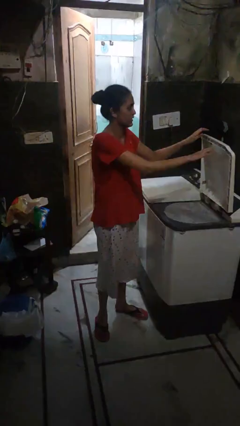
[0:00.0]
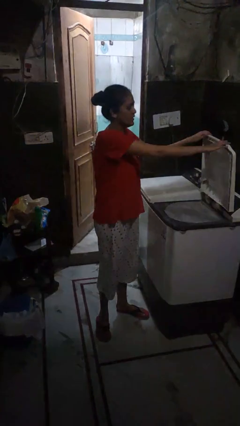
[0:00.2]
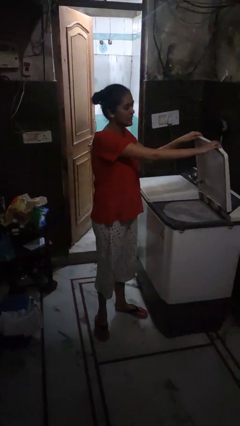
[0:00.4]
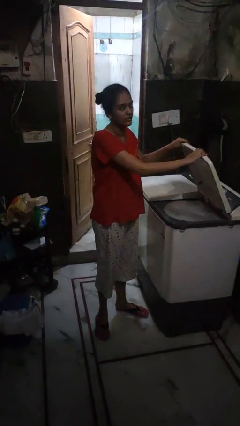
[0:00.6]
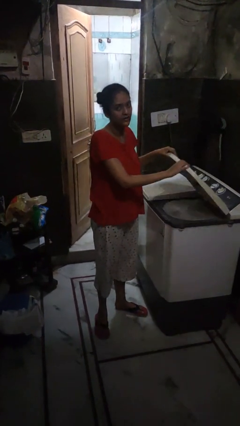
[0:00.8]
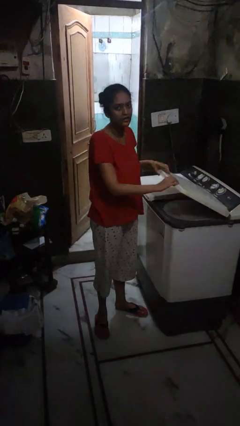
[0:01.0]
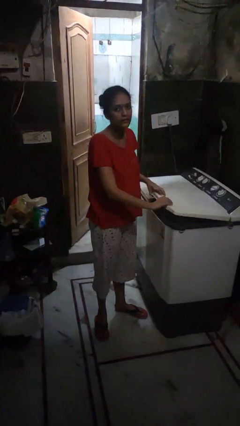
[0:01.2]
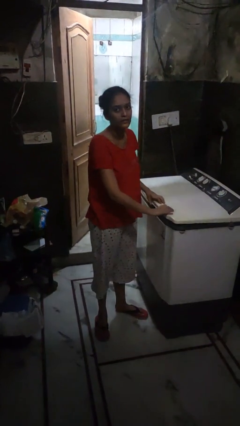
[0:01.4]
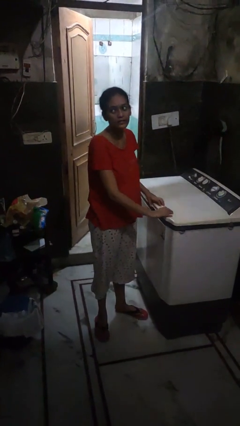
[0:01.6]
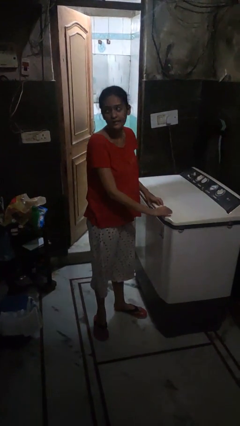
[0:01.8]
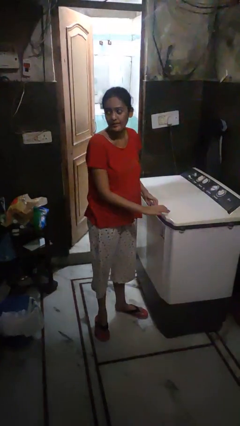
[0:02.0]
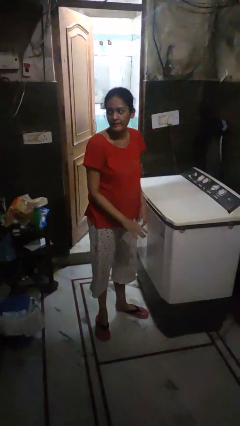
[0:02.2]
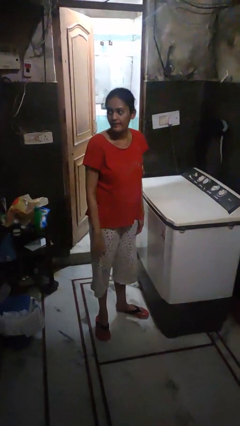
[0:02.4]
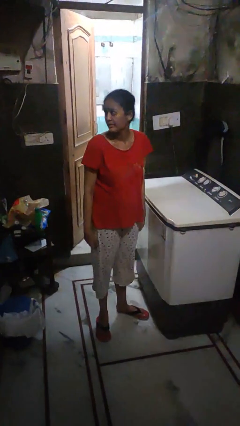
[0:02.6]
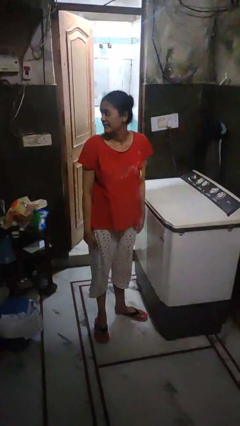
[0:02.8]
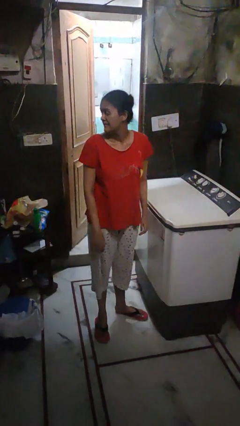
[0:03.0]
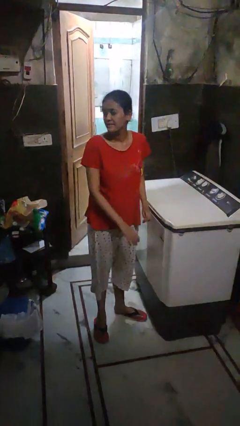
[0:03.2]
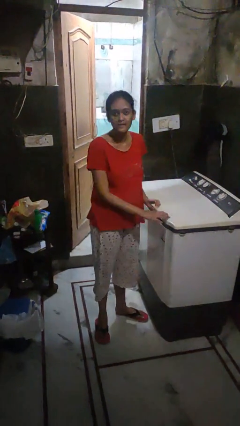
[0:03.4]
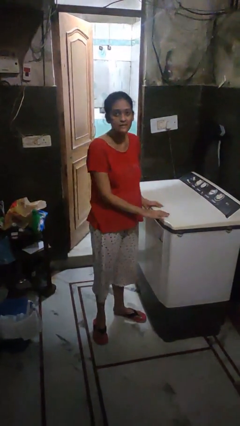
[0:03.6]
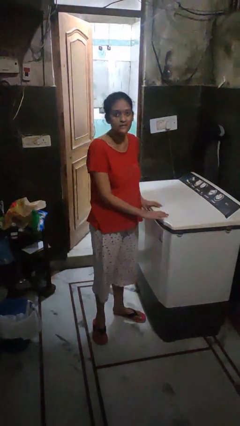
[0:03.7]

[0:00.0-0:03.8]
person closes clothes washer

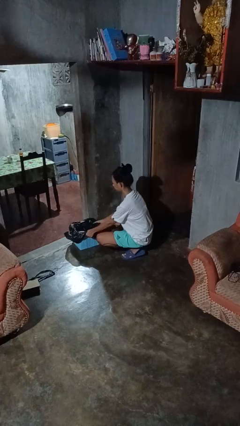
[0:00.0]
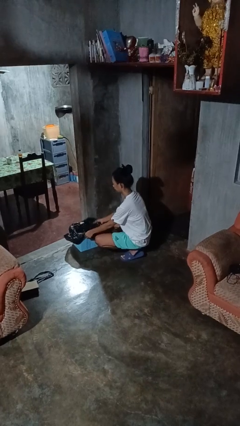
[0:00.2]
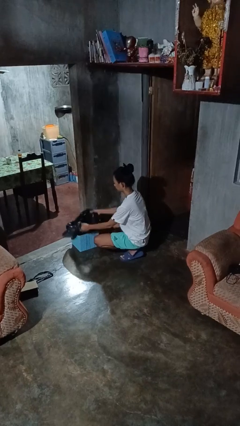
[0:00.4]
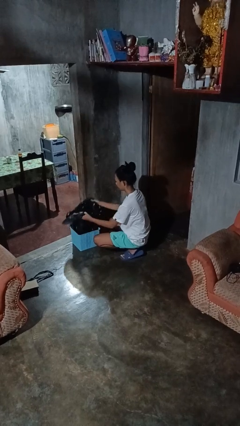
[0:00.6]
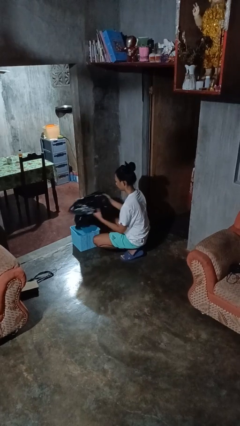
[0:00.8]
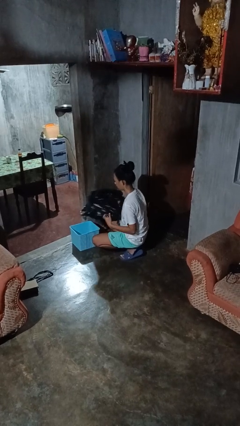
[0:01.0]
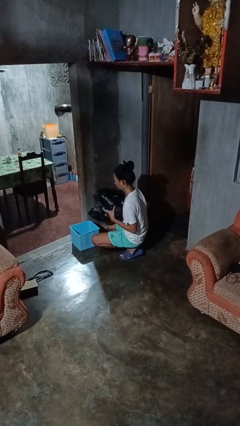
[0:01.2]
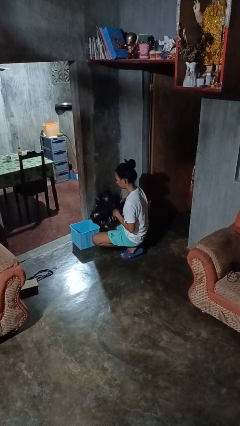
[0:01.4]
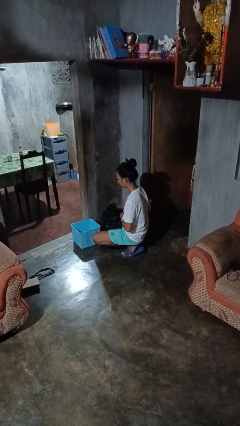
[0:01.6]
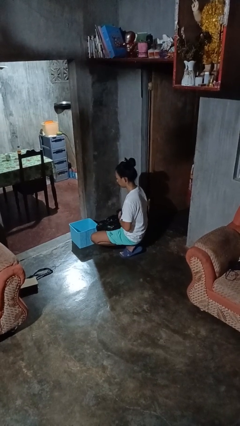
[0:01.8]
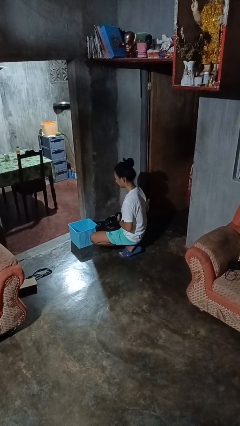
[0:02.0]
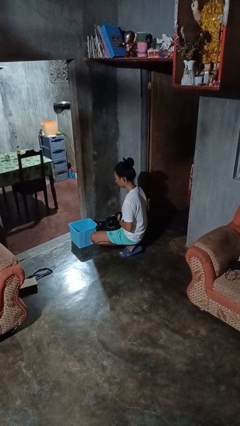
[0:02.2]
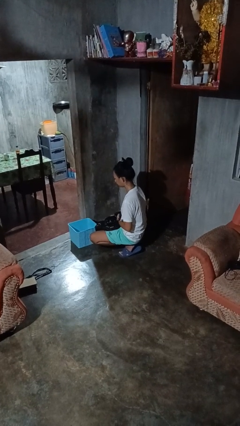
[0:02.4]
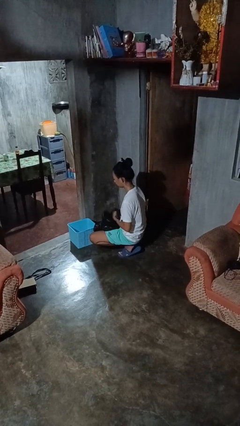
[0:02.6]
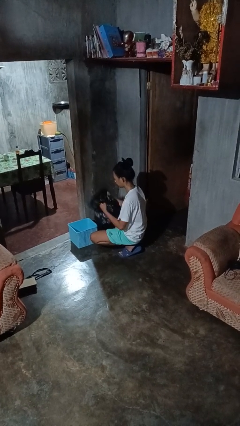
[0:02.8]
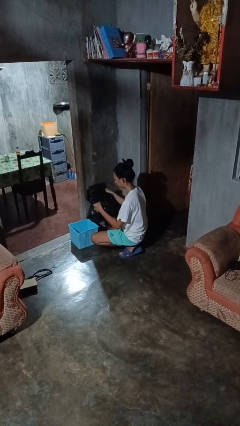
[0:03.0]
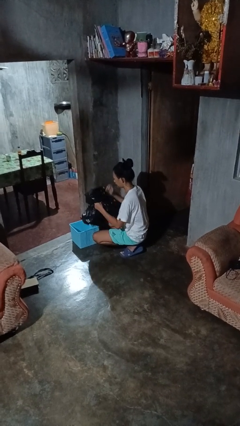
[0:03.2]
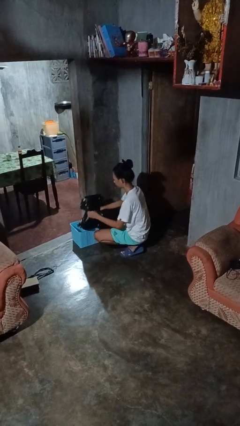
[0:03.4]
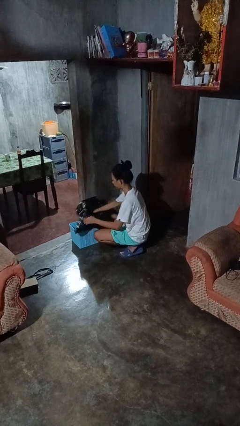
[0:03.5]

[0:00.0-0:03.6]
person removes trashbag from trashcan

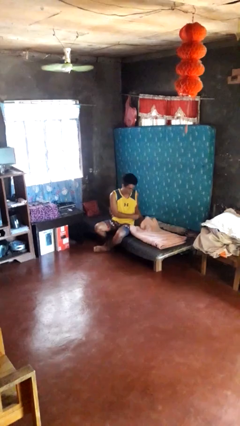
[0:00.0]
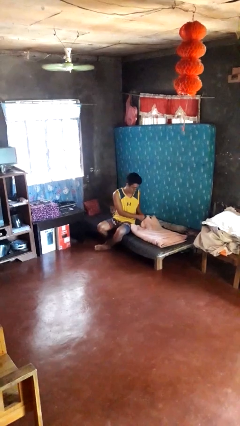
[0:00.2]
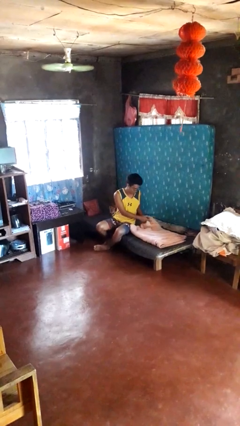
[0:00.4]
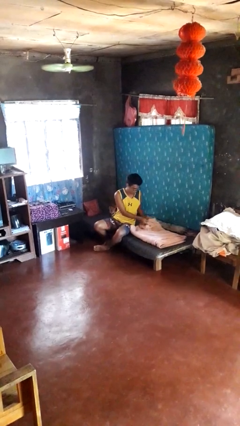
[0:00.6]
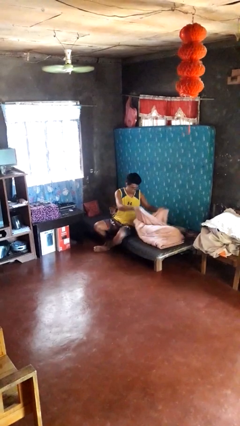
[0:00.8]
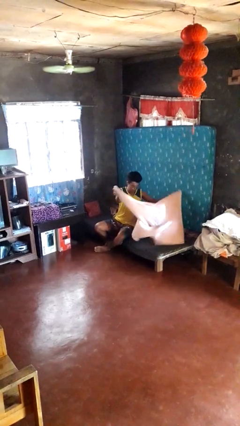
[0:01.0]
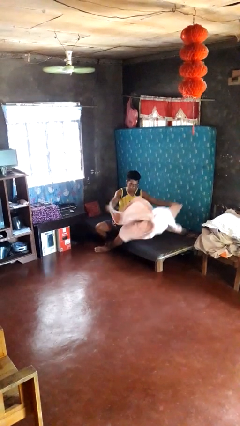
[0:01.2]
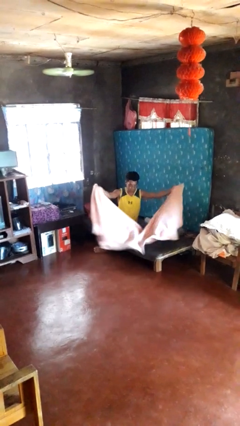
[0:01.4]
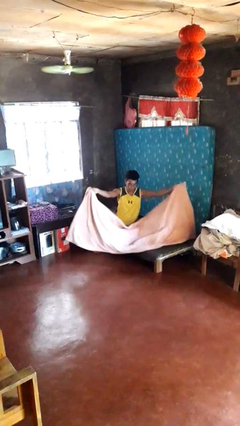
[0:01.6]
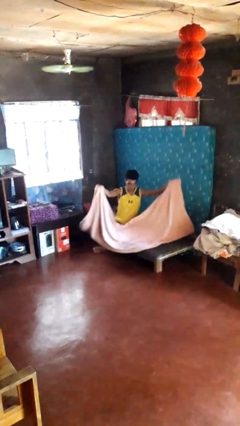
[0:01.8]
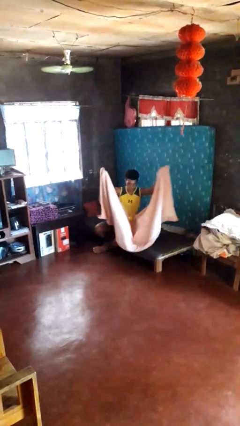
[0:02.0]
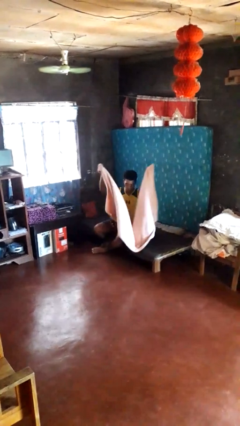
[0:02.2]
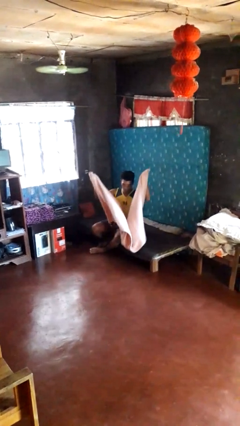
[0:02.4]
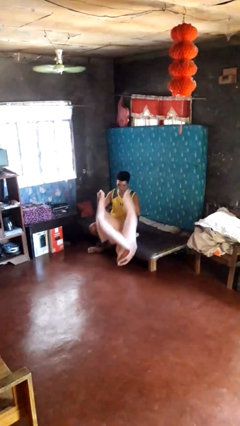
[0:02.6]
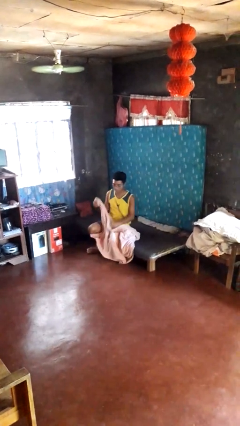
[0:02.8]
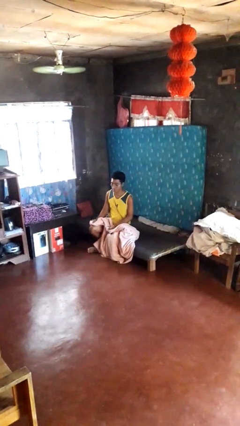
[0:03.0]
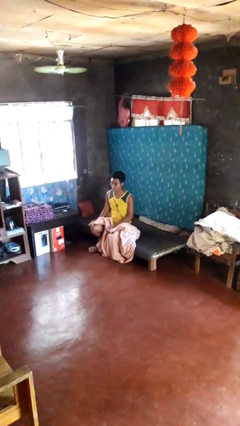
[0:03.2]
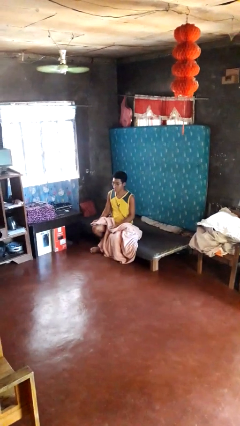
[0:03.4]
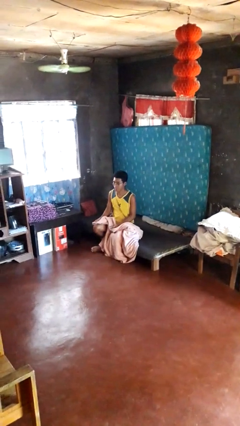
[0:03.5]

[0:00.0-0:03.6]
person unfolds blanket

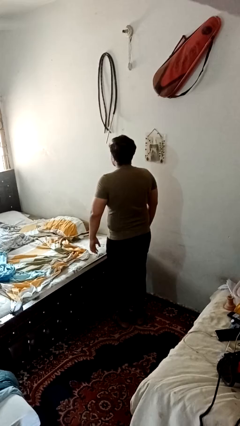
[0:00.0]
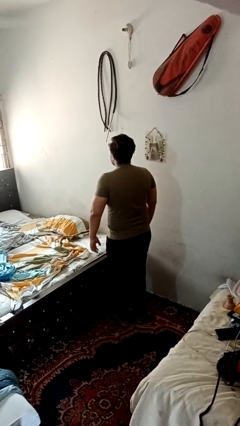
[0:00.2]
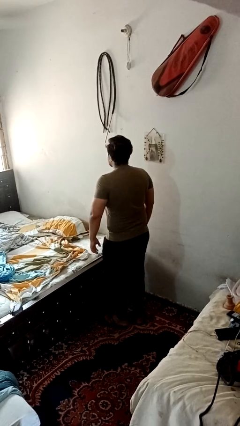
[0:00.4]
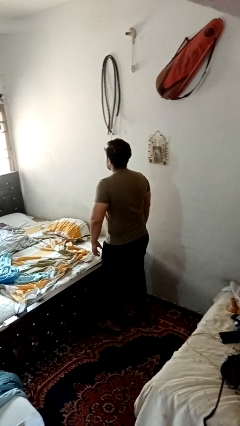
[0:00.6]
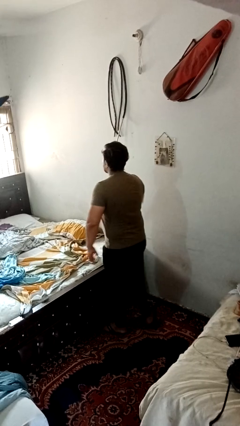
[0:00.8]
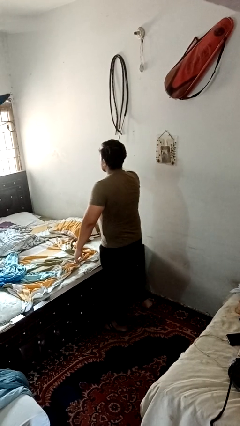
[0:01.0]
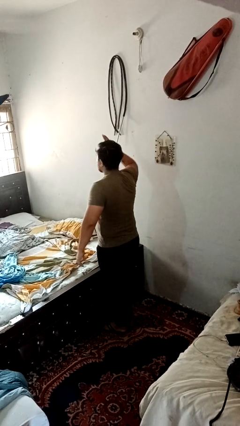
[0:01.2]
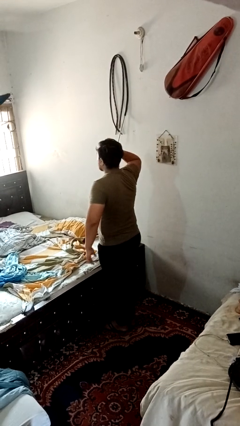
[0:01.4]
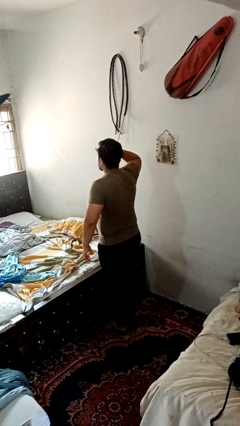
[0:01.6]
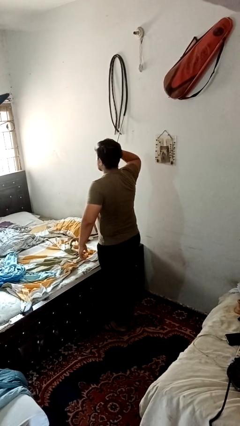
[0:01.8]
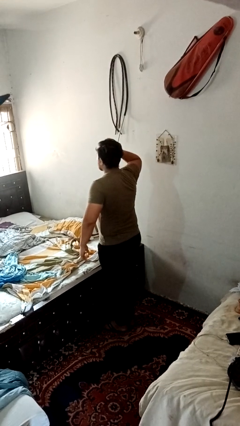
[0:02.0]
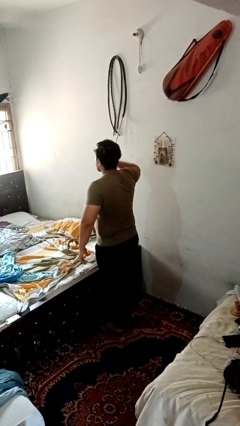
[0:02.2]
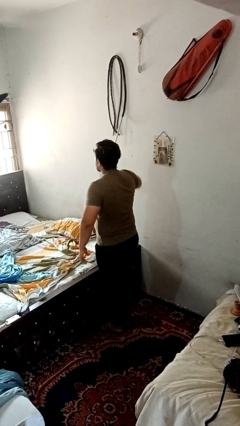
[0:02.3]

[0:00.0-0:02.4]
person salutes

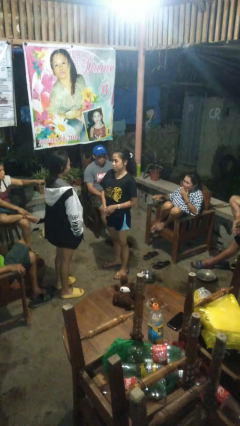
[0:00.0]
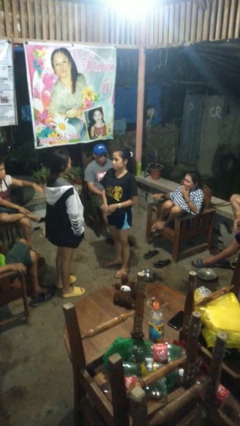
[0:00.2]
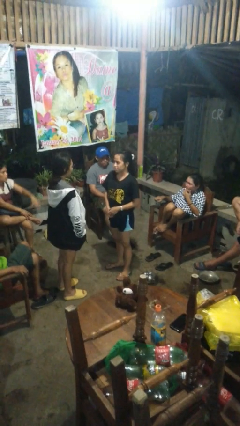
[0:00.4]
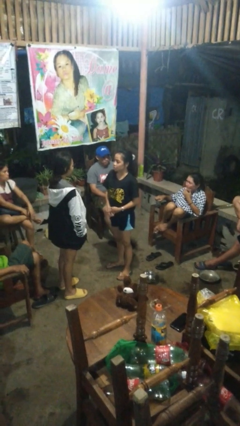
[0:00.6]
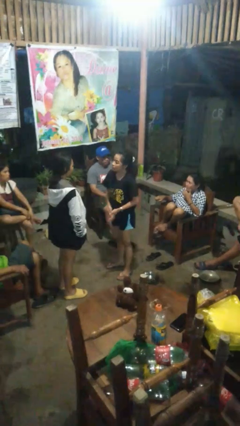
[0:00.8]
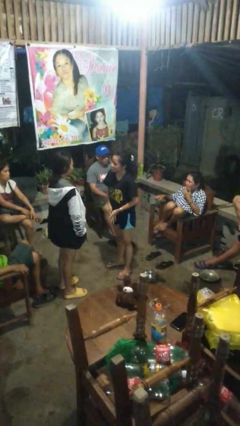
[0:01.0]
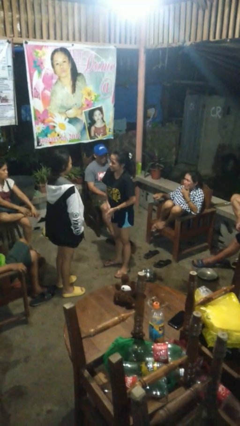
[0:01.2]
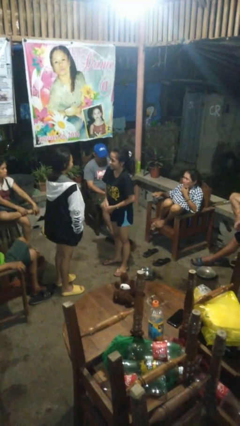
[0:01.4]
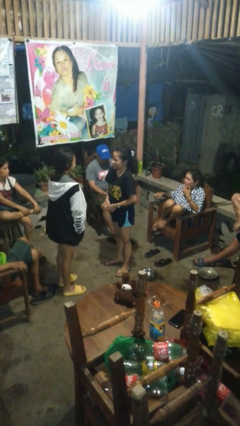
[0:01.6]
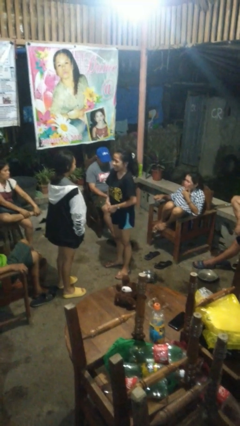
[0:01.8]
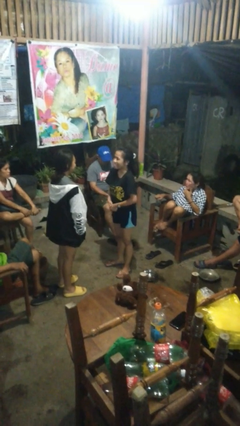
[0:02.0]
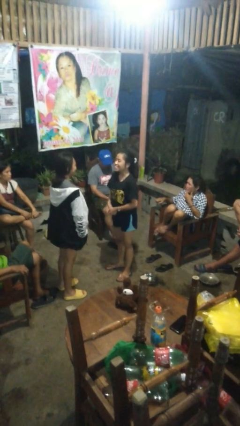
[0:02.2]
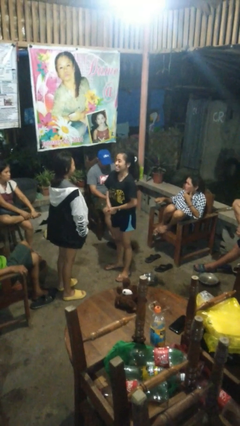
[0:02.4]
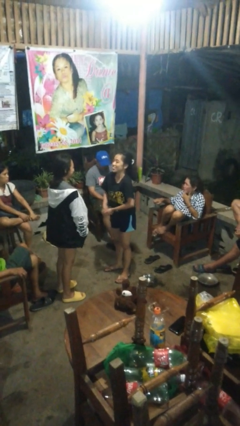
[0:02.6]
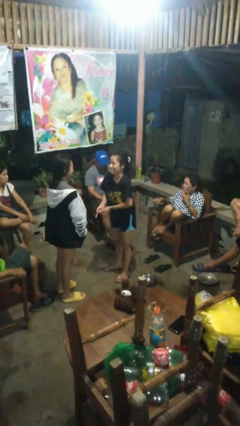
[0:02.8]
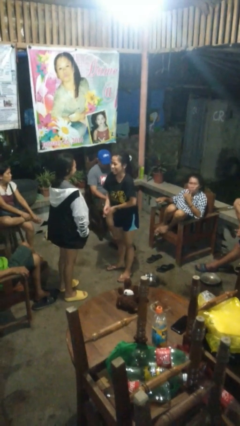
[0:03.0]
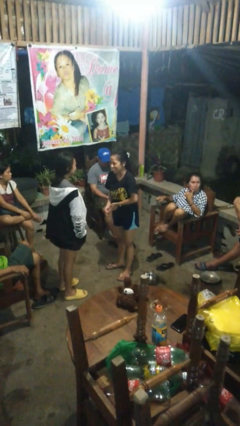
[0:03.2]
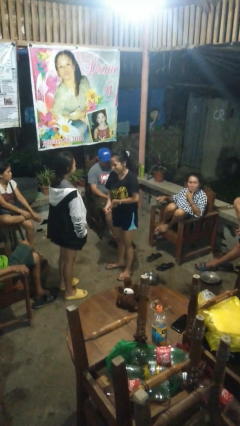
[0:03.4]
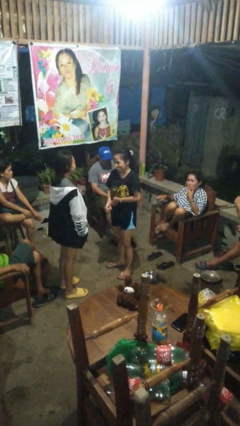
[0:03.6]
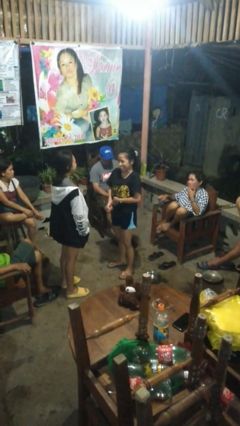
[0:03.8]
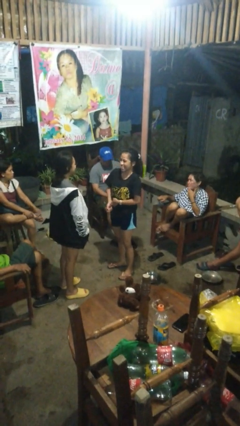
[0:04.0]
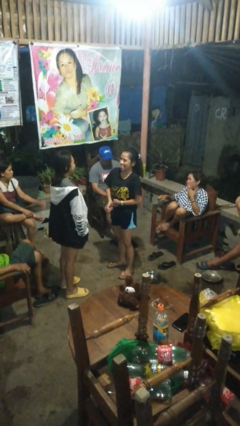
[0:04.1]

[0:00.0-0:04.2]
person laughs with person
